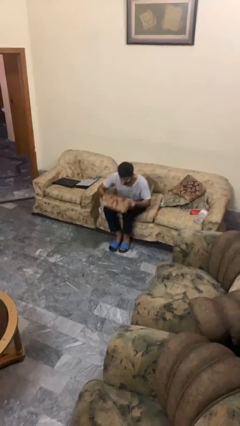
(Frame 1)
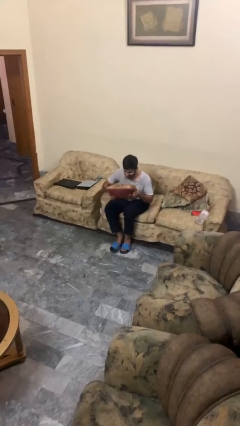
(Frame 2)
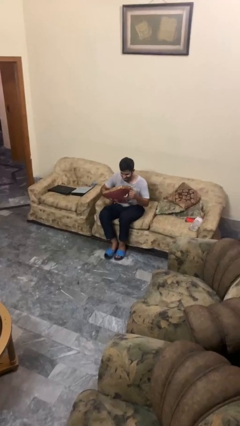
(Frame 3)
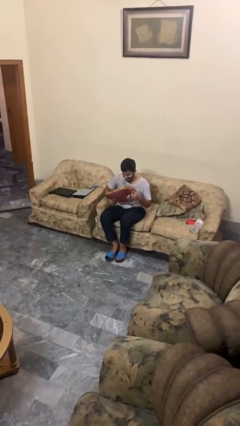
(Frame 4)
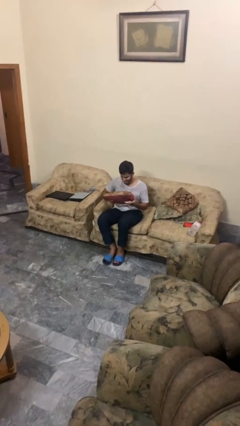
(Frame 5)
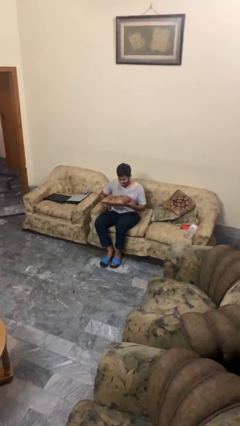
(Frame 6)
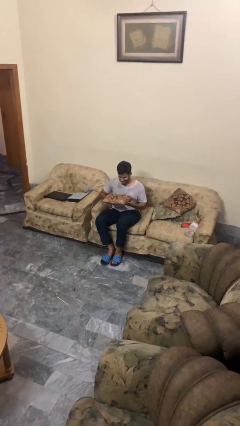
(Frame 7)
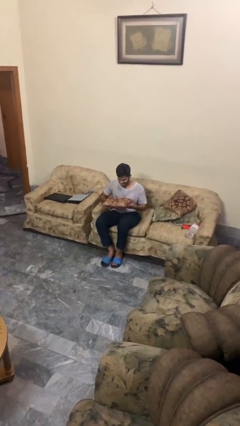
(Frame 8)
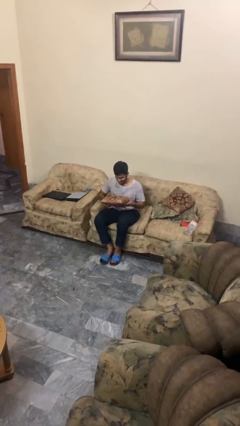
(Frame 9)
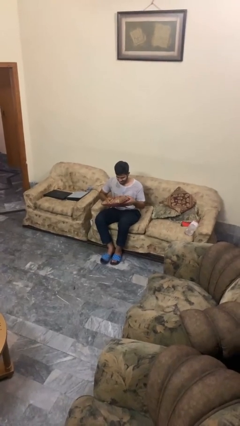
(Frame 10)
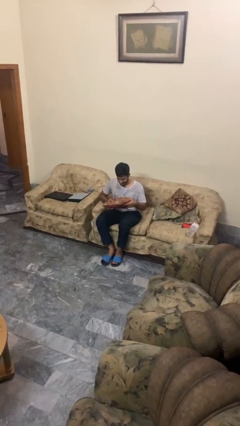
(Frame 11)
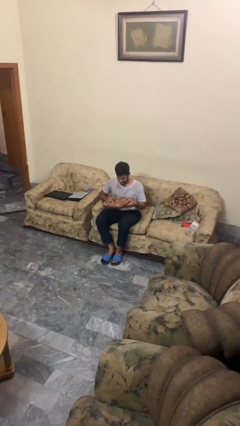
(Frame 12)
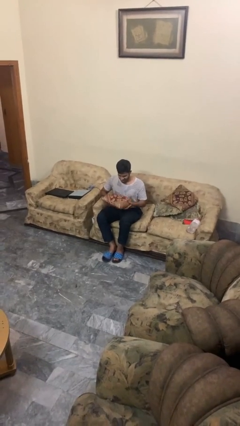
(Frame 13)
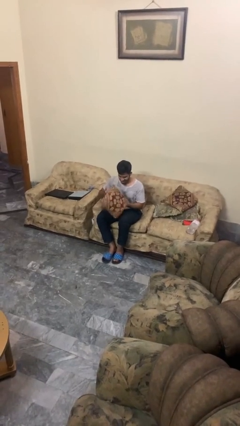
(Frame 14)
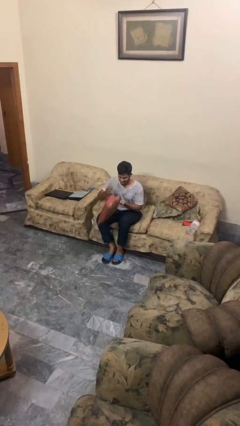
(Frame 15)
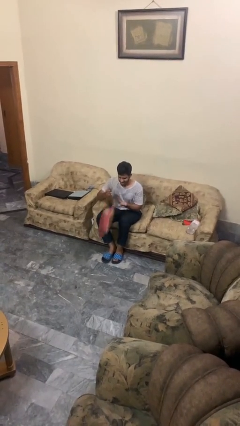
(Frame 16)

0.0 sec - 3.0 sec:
person picks up object from floor

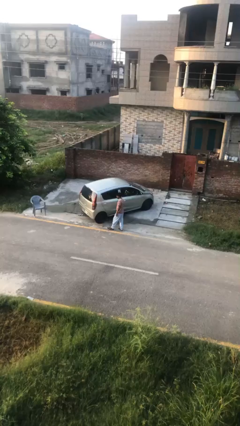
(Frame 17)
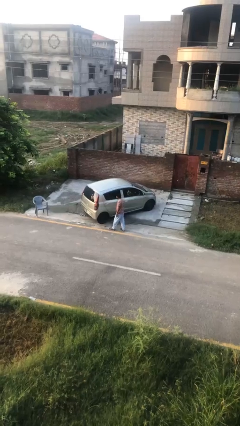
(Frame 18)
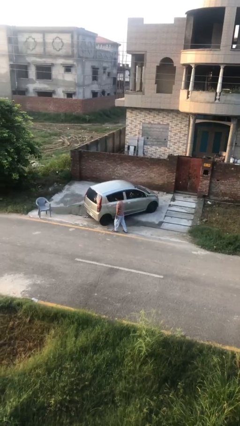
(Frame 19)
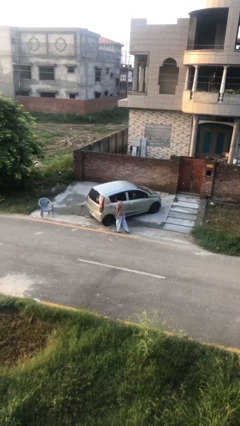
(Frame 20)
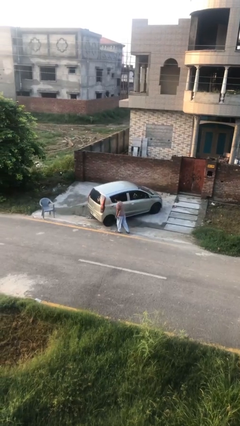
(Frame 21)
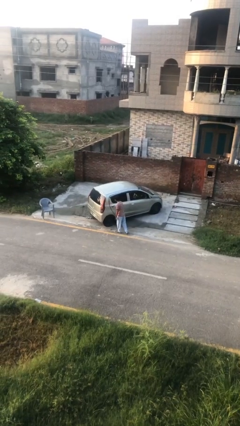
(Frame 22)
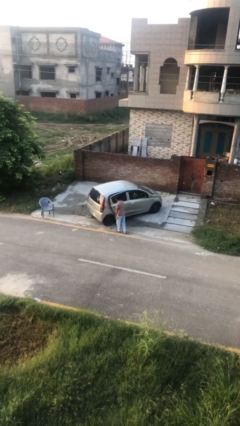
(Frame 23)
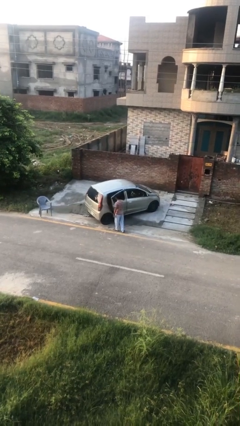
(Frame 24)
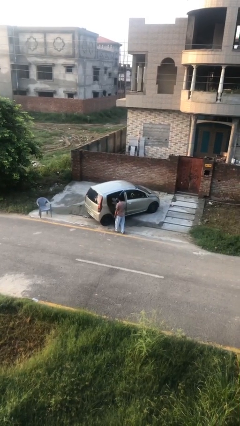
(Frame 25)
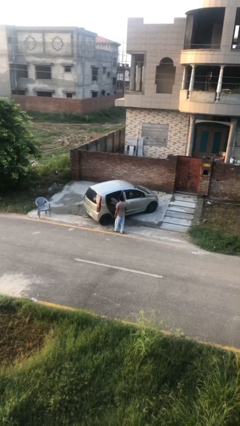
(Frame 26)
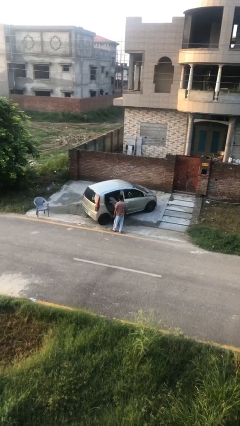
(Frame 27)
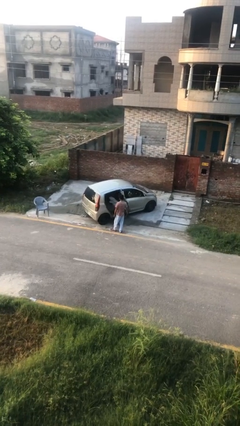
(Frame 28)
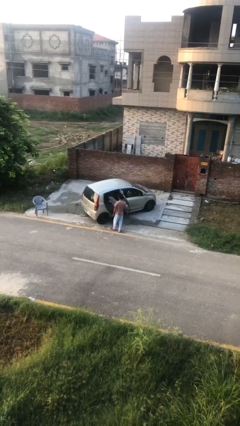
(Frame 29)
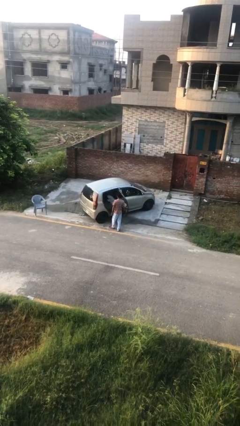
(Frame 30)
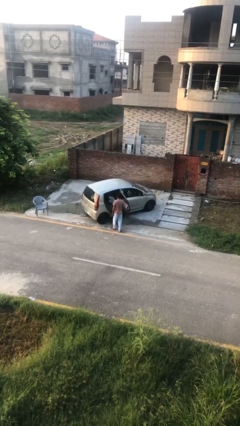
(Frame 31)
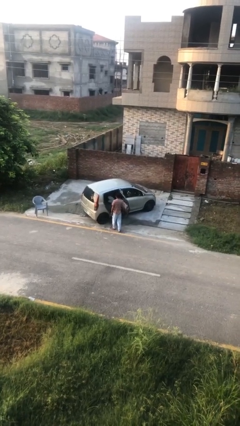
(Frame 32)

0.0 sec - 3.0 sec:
person opens car door

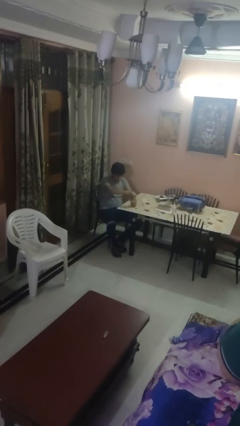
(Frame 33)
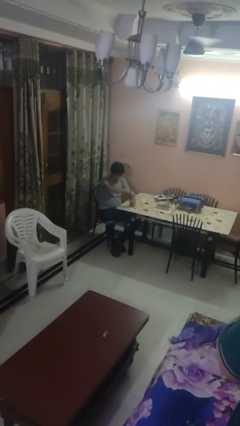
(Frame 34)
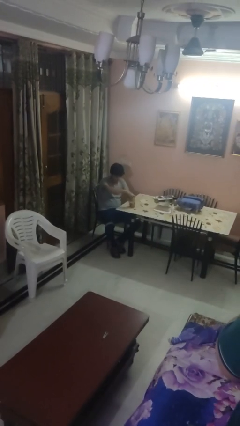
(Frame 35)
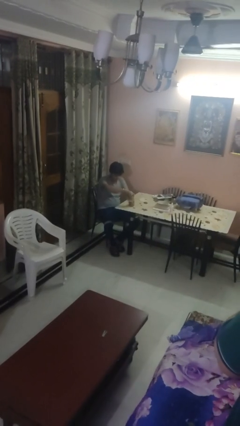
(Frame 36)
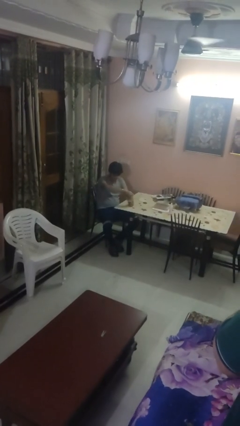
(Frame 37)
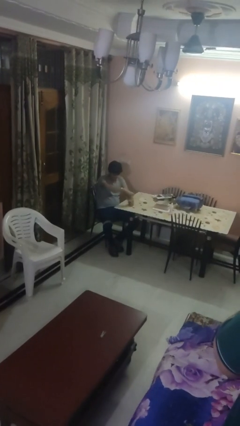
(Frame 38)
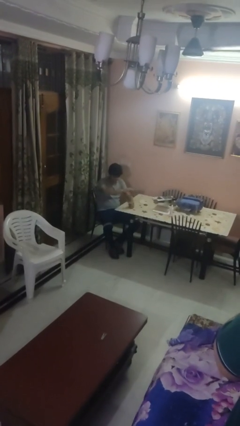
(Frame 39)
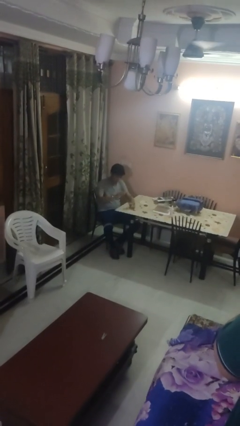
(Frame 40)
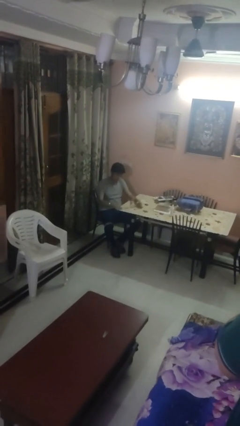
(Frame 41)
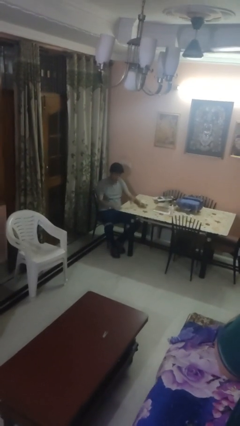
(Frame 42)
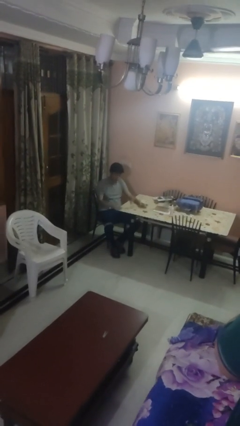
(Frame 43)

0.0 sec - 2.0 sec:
person unscrews lid from bottle

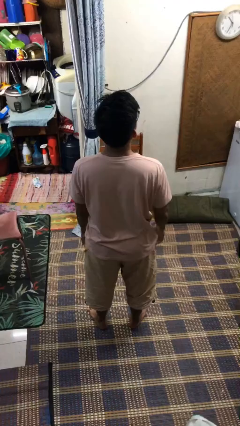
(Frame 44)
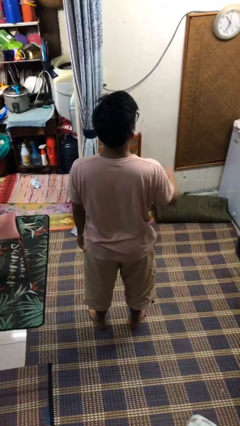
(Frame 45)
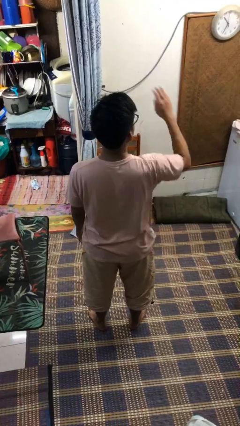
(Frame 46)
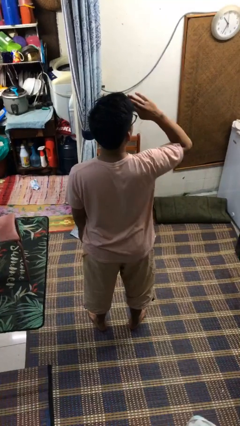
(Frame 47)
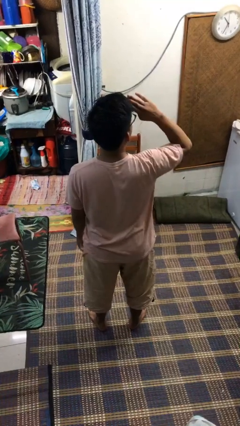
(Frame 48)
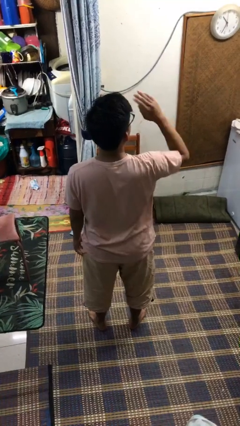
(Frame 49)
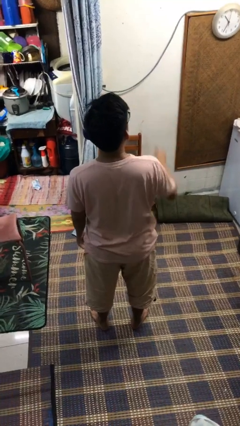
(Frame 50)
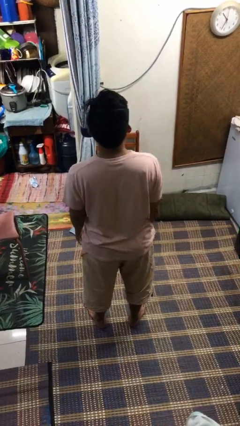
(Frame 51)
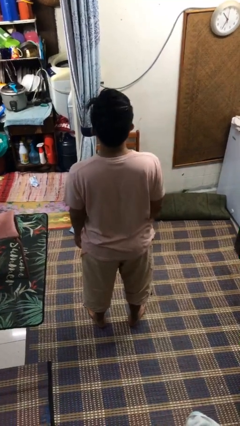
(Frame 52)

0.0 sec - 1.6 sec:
person salutes

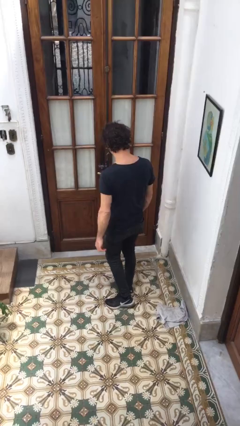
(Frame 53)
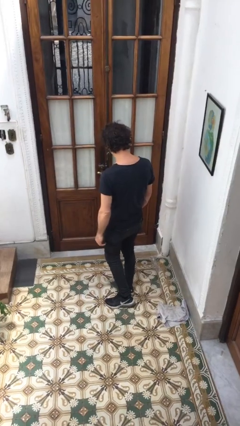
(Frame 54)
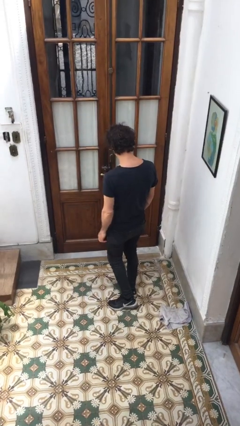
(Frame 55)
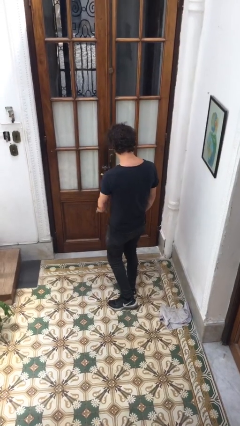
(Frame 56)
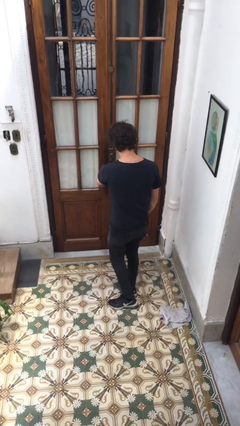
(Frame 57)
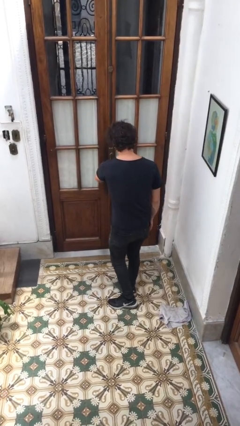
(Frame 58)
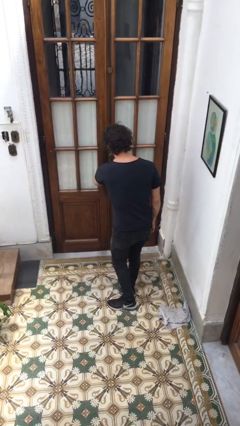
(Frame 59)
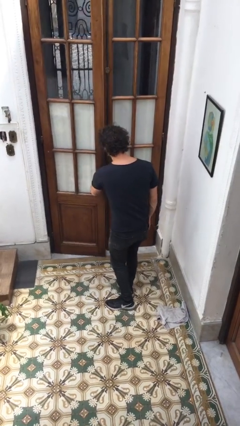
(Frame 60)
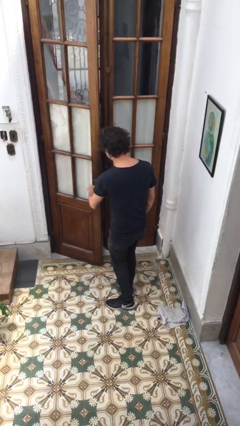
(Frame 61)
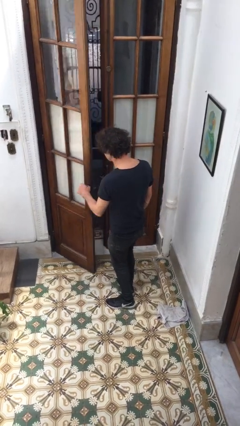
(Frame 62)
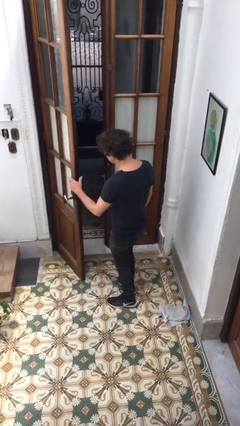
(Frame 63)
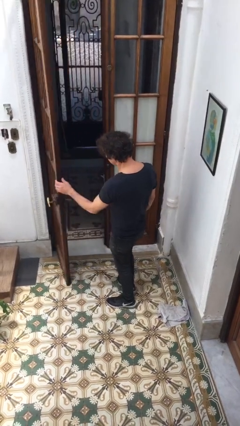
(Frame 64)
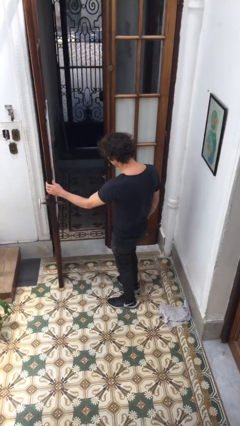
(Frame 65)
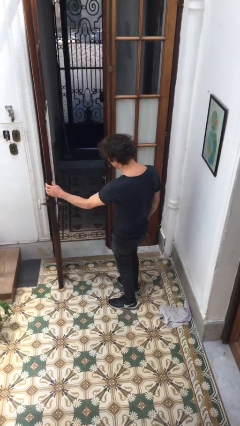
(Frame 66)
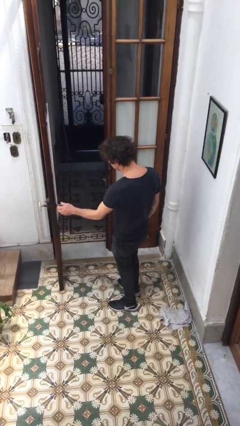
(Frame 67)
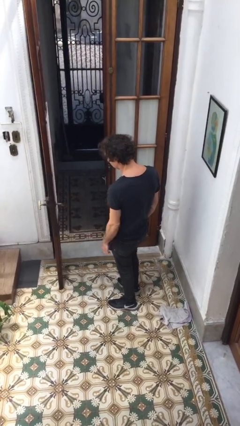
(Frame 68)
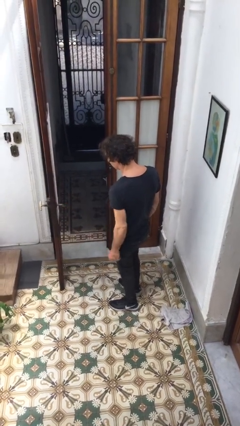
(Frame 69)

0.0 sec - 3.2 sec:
person opens facility door

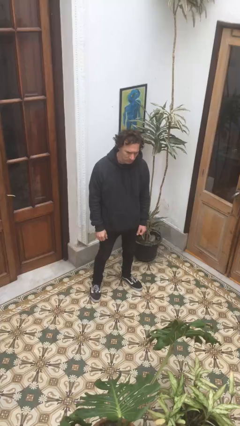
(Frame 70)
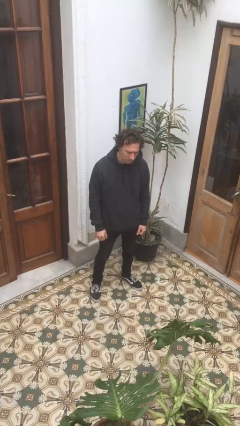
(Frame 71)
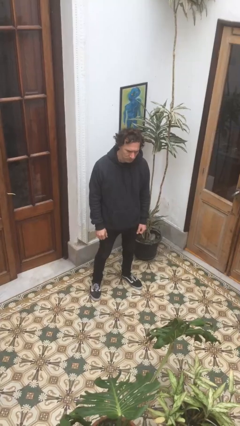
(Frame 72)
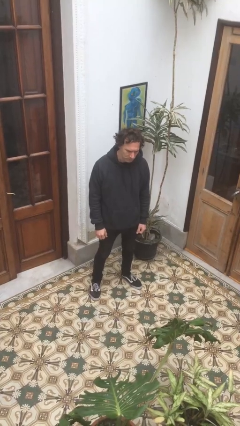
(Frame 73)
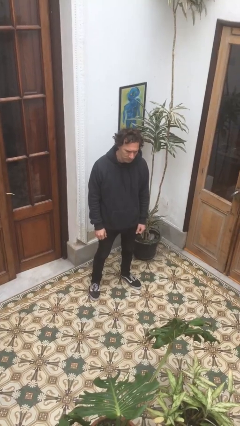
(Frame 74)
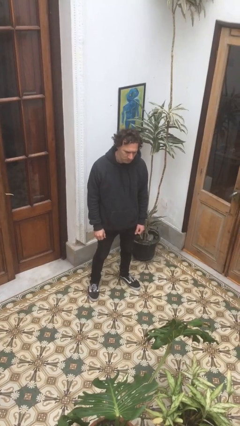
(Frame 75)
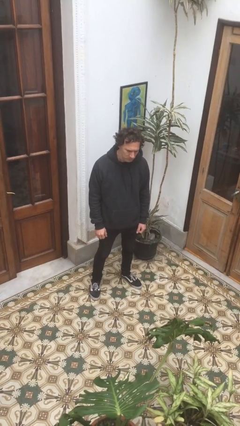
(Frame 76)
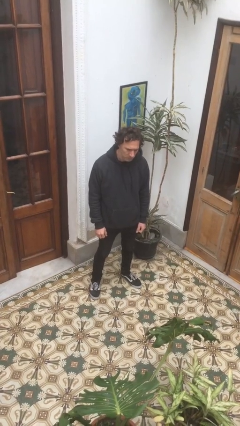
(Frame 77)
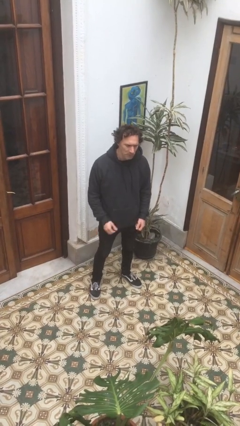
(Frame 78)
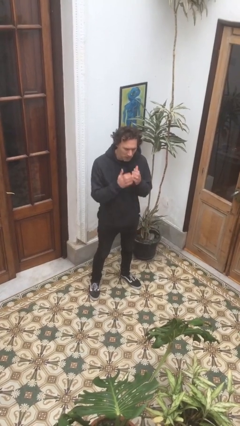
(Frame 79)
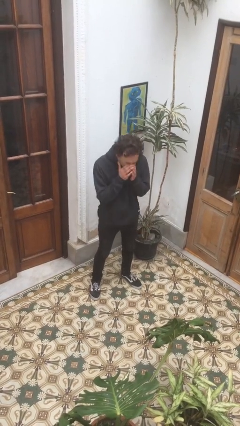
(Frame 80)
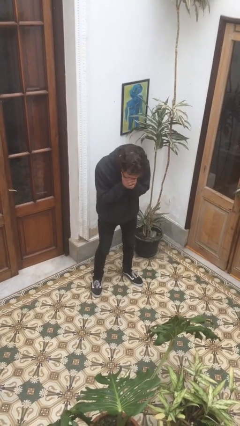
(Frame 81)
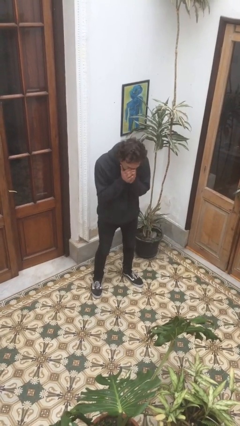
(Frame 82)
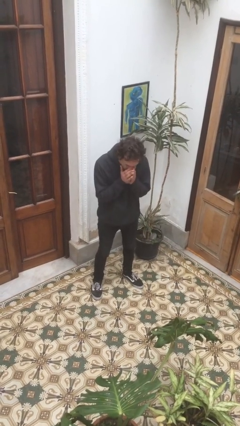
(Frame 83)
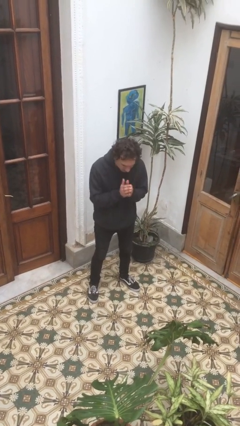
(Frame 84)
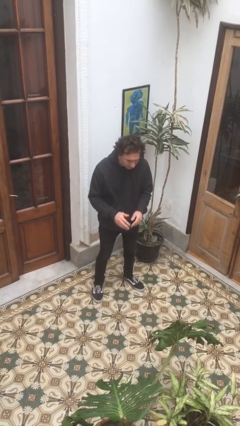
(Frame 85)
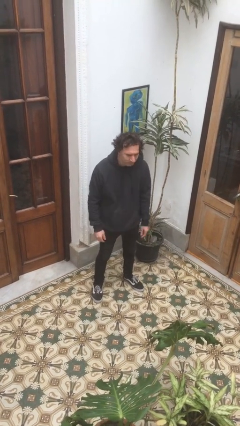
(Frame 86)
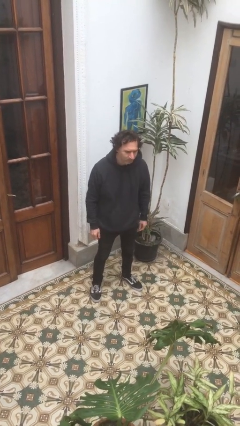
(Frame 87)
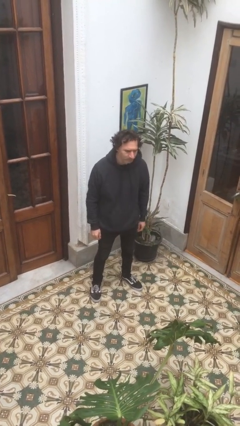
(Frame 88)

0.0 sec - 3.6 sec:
person sneezes into hand

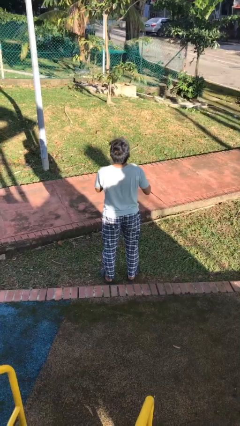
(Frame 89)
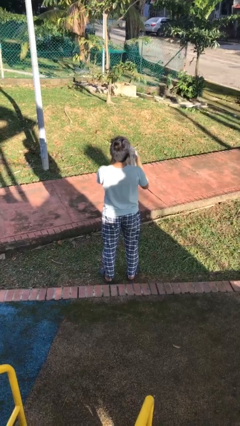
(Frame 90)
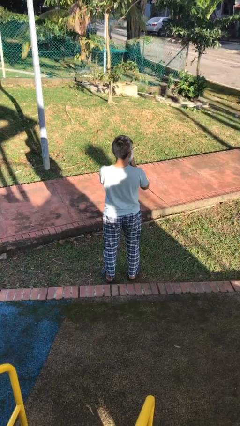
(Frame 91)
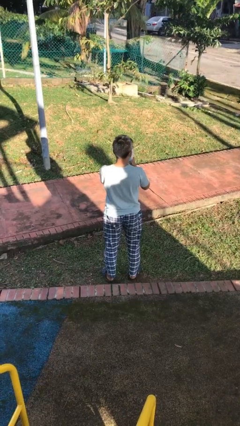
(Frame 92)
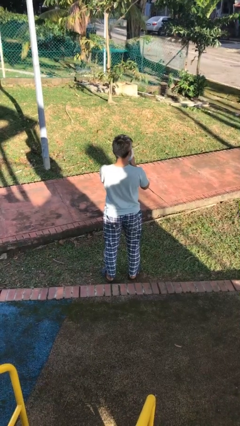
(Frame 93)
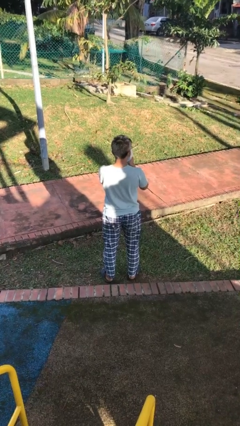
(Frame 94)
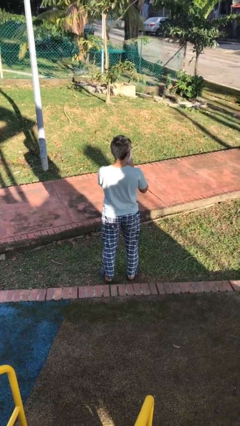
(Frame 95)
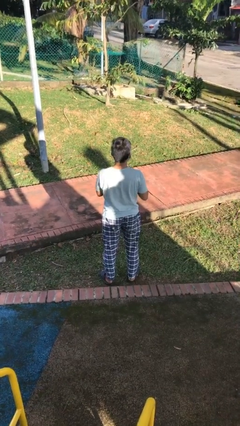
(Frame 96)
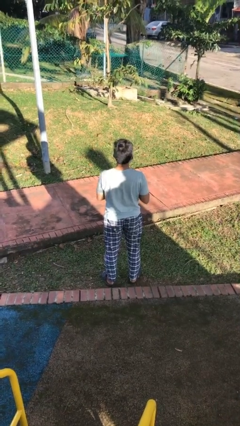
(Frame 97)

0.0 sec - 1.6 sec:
person blows nose
